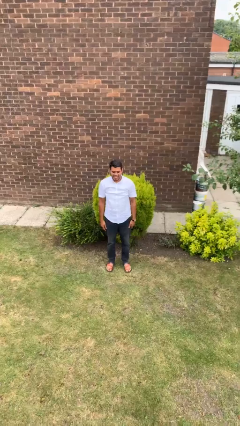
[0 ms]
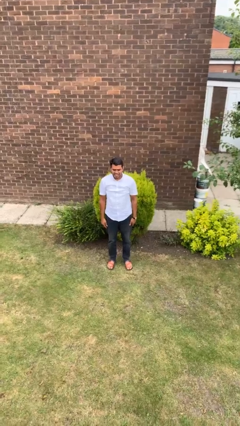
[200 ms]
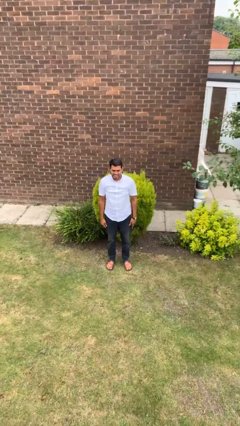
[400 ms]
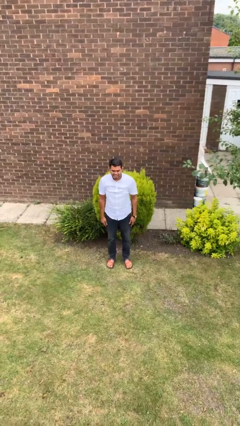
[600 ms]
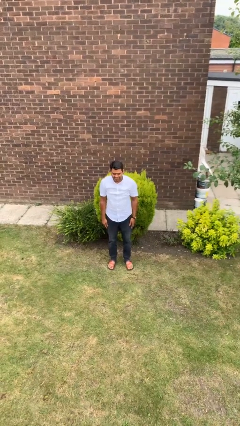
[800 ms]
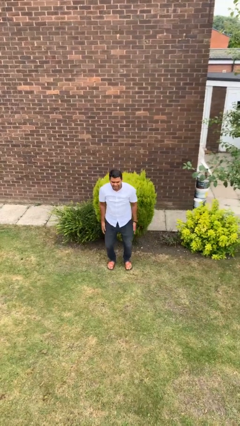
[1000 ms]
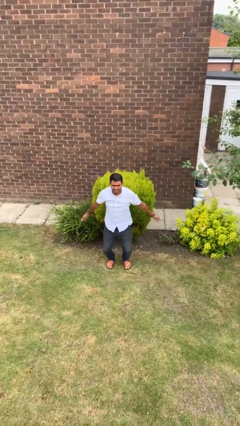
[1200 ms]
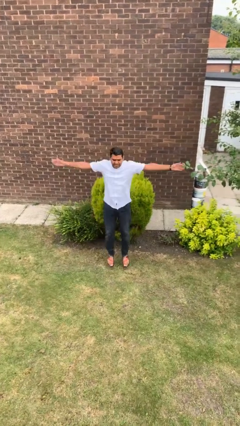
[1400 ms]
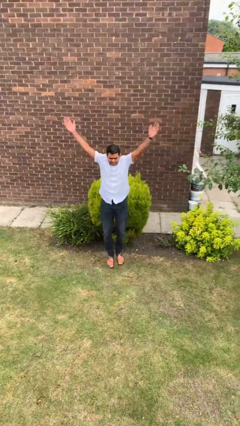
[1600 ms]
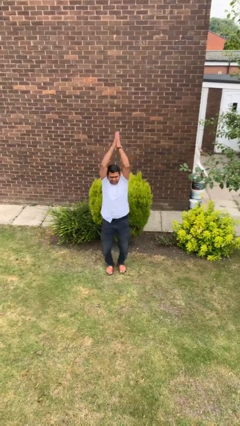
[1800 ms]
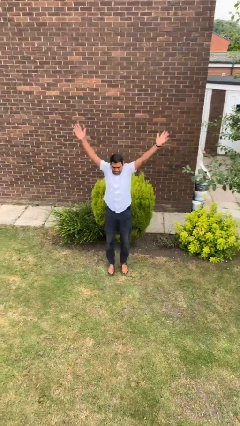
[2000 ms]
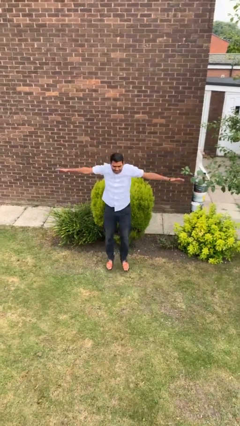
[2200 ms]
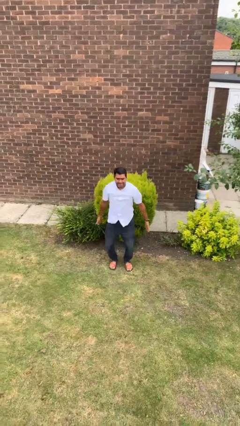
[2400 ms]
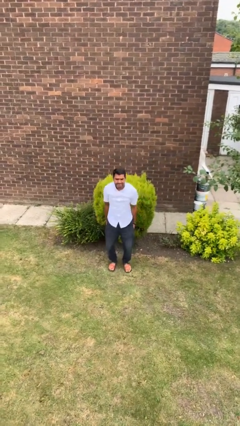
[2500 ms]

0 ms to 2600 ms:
person exercises with jumping jacks

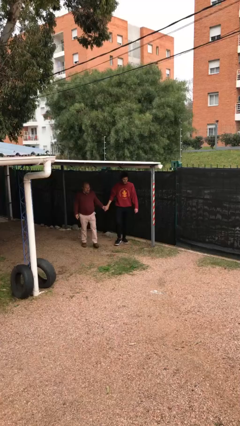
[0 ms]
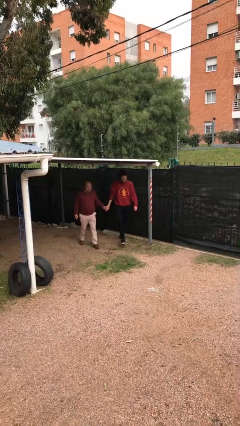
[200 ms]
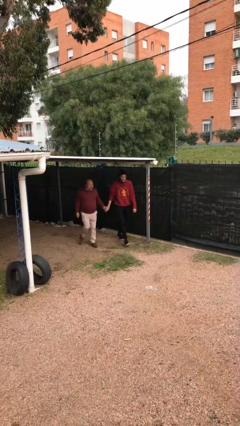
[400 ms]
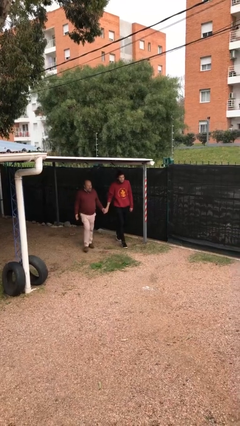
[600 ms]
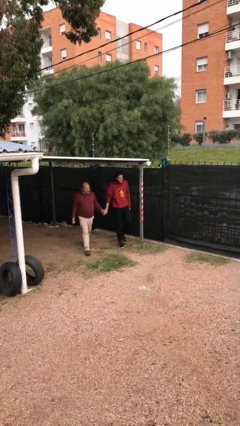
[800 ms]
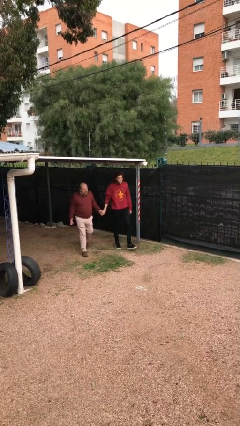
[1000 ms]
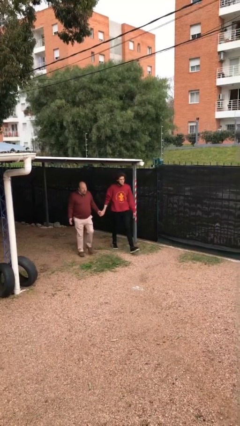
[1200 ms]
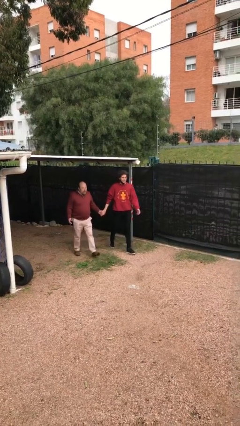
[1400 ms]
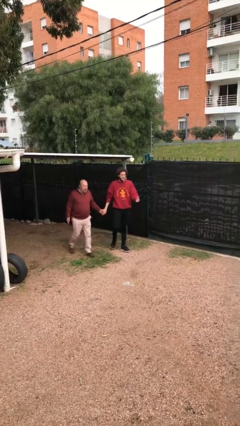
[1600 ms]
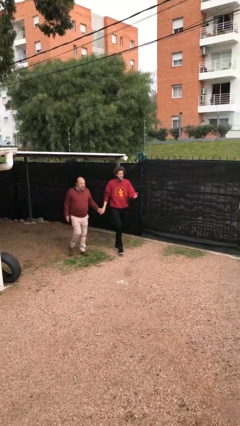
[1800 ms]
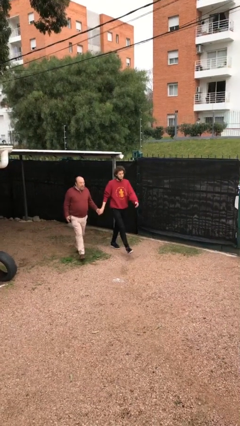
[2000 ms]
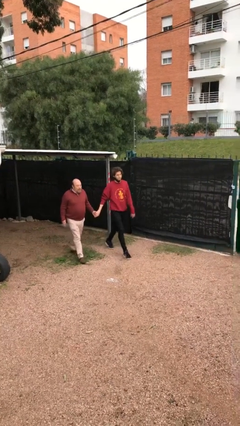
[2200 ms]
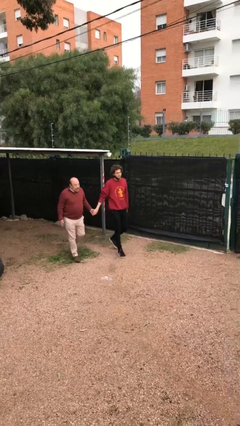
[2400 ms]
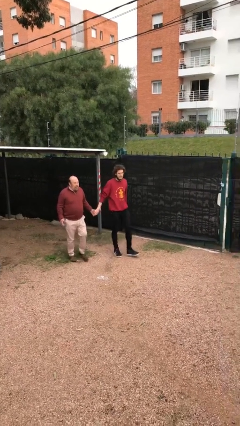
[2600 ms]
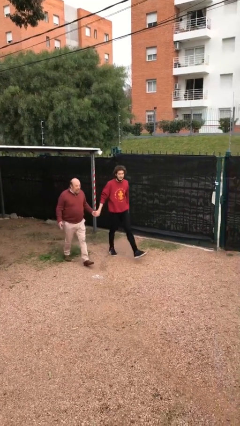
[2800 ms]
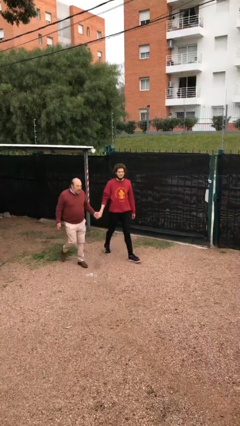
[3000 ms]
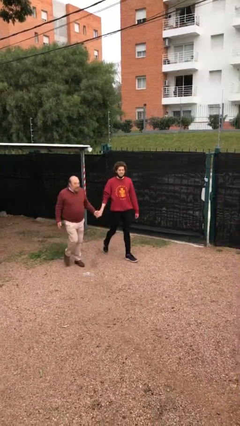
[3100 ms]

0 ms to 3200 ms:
person holds hand

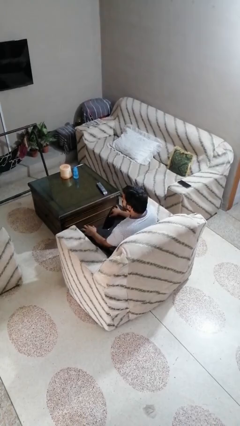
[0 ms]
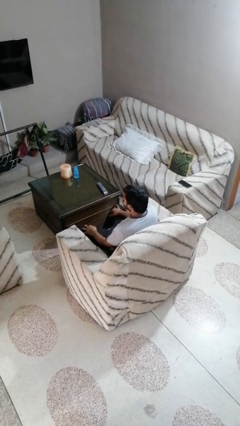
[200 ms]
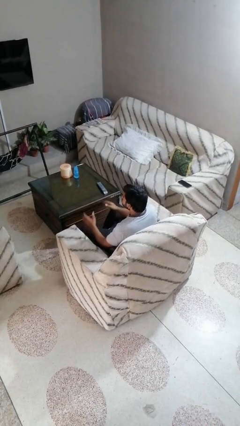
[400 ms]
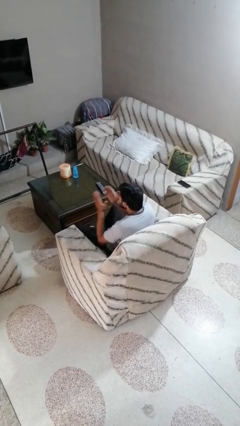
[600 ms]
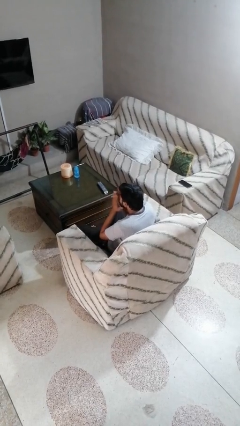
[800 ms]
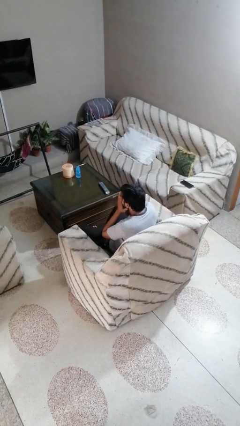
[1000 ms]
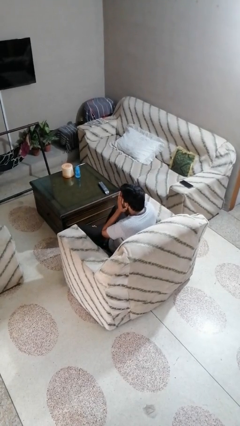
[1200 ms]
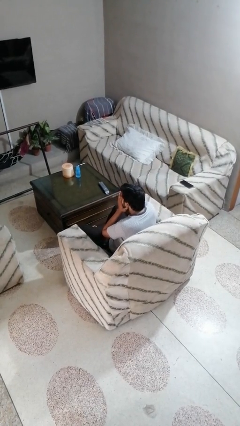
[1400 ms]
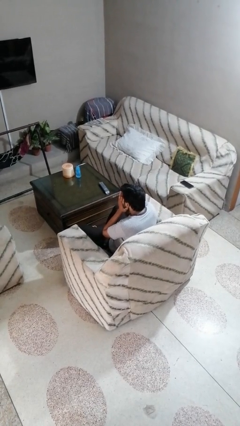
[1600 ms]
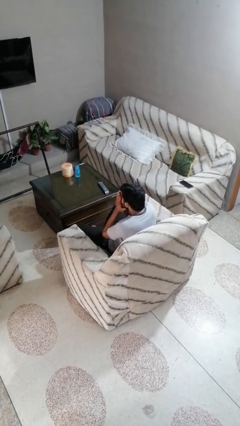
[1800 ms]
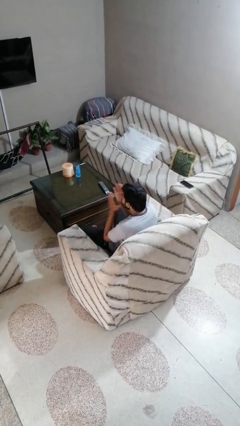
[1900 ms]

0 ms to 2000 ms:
person covers face with hands

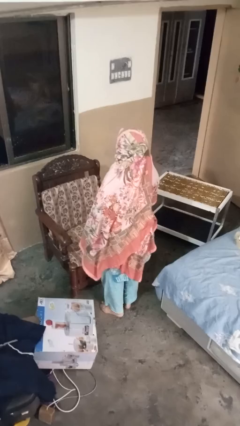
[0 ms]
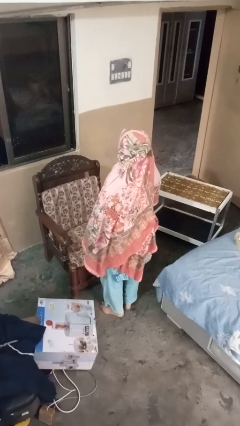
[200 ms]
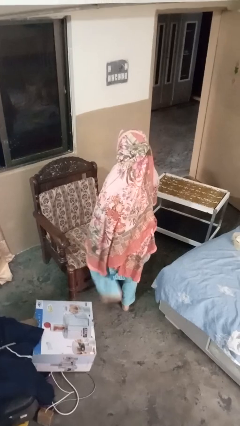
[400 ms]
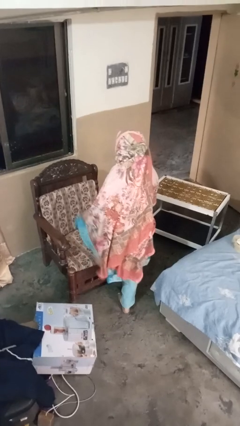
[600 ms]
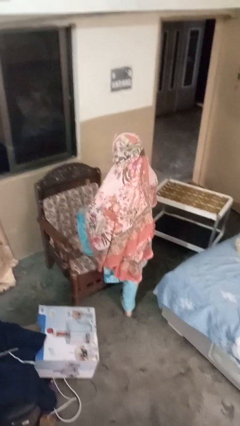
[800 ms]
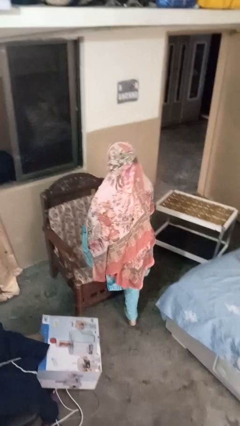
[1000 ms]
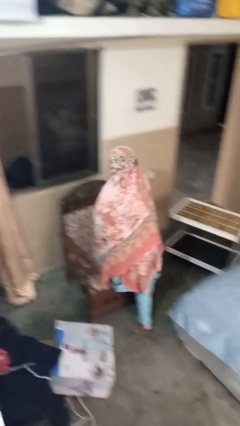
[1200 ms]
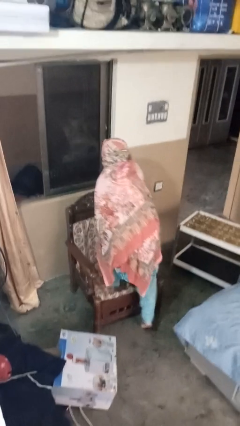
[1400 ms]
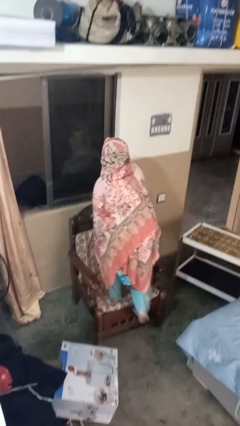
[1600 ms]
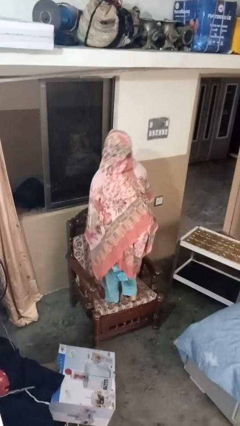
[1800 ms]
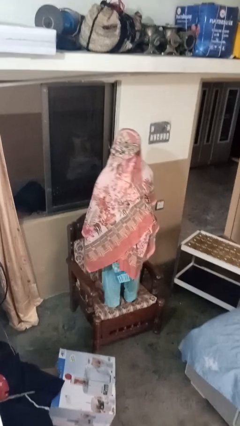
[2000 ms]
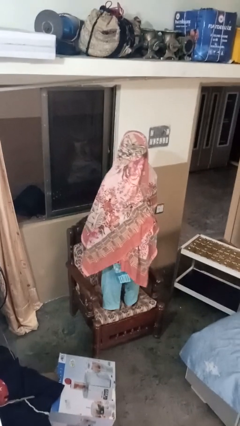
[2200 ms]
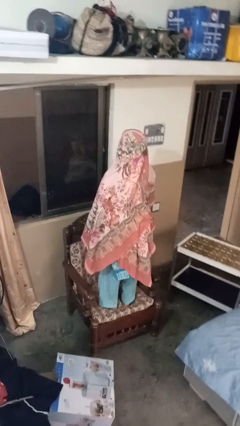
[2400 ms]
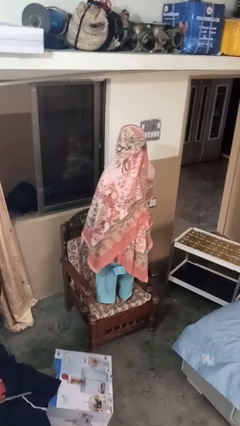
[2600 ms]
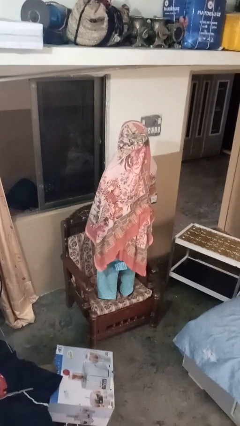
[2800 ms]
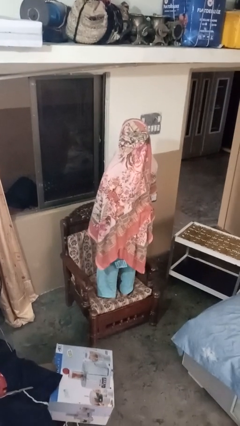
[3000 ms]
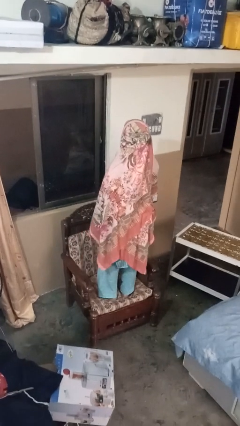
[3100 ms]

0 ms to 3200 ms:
person climbs on couch

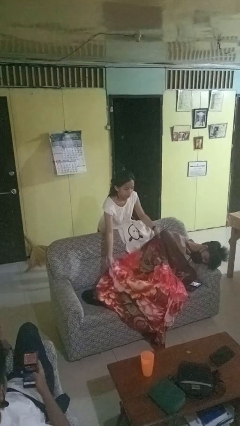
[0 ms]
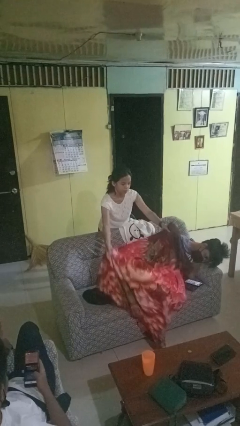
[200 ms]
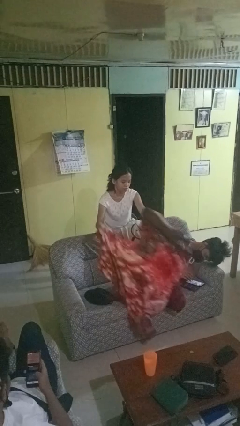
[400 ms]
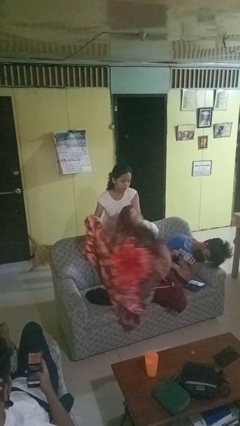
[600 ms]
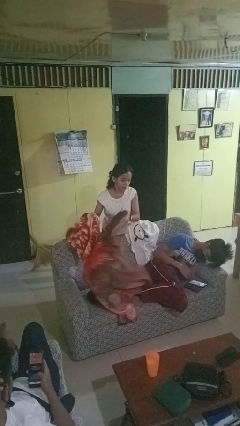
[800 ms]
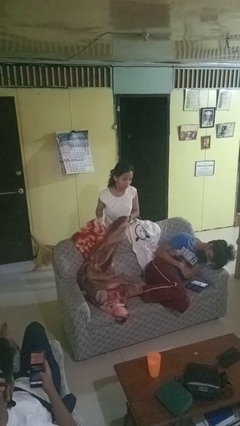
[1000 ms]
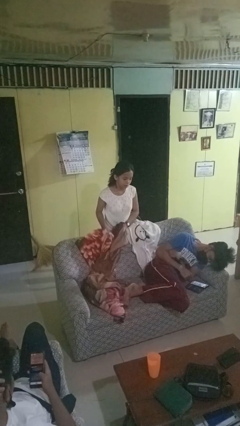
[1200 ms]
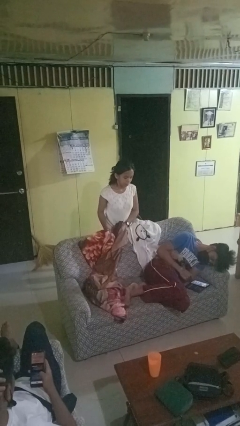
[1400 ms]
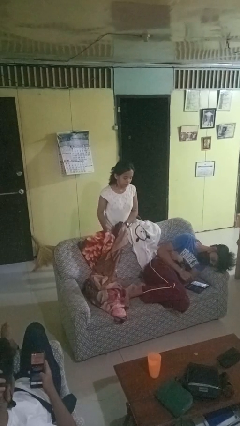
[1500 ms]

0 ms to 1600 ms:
person uncovers friend with blanket

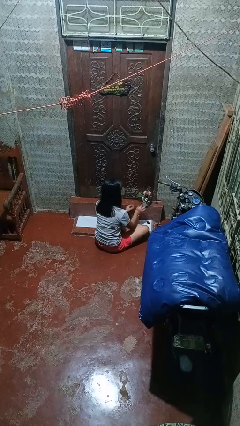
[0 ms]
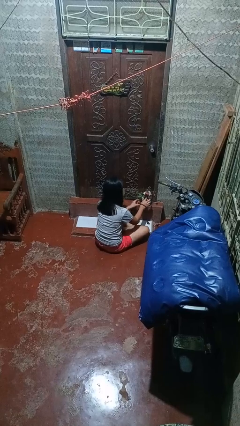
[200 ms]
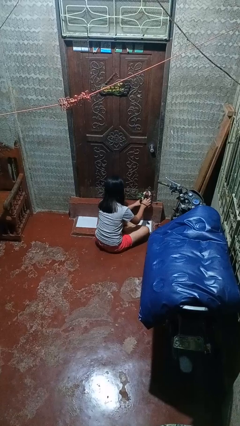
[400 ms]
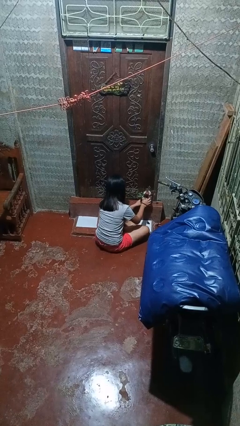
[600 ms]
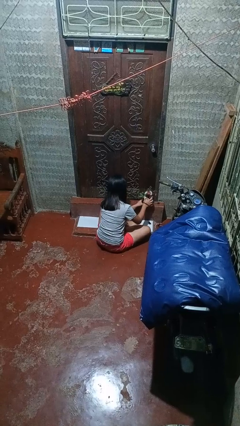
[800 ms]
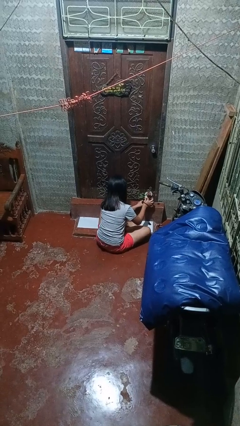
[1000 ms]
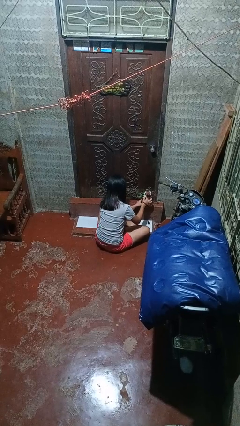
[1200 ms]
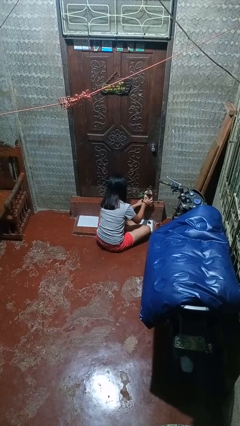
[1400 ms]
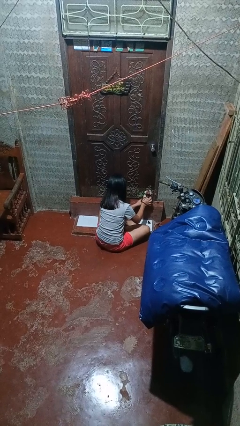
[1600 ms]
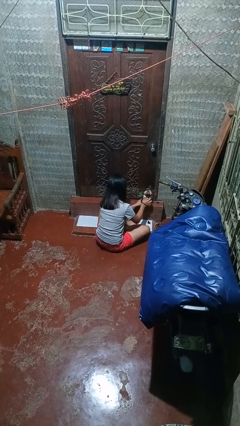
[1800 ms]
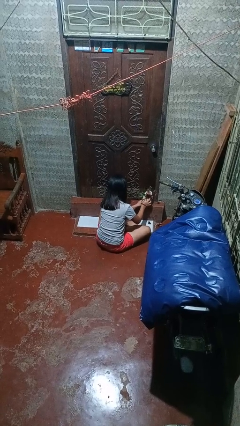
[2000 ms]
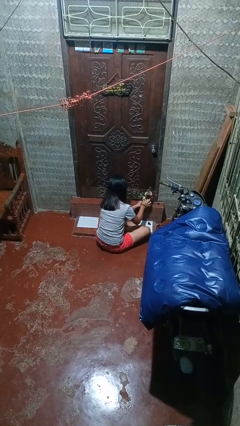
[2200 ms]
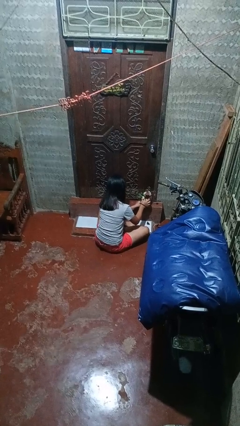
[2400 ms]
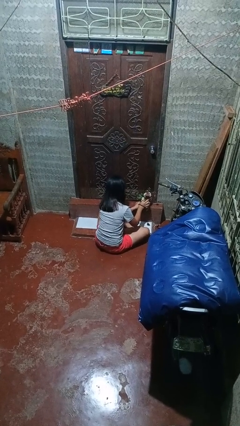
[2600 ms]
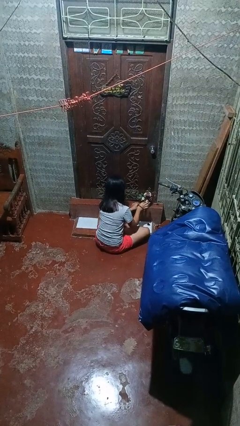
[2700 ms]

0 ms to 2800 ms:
person arranges flowers in vase

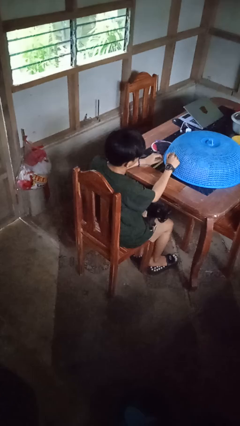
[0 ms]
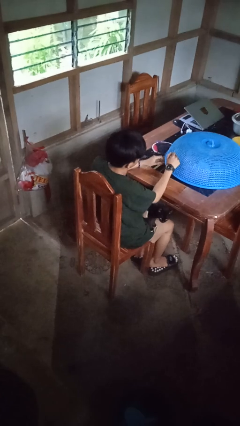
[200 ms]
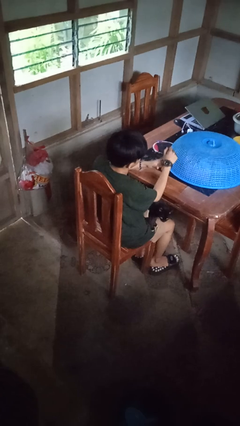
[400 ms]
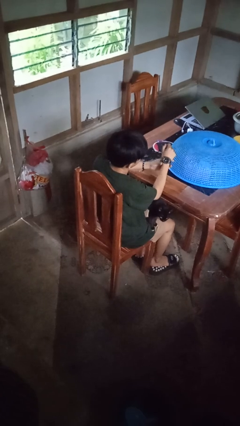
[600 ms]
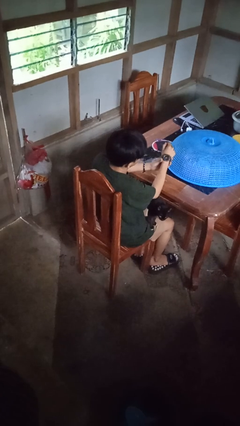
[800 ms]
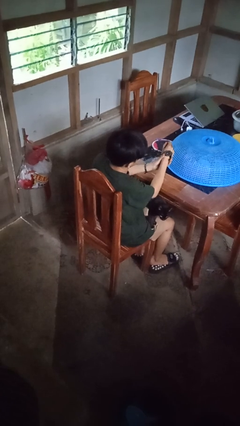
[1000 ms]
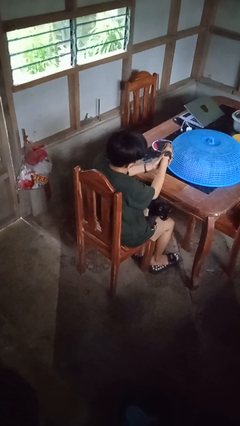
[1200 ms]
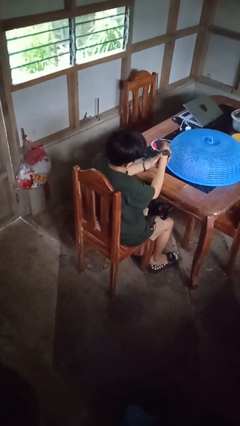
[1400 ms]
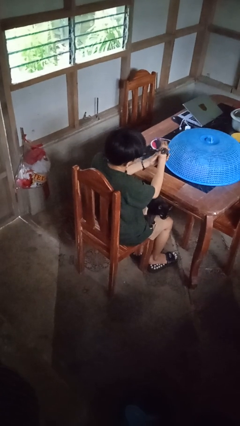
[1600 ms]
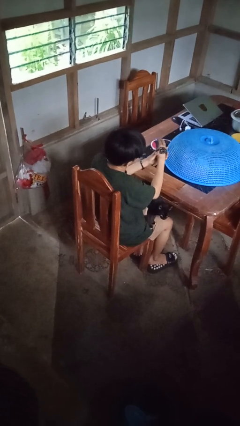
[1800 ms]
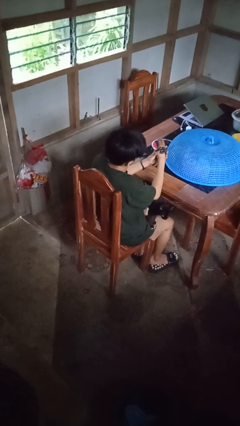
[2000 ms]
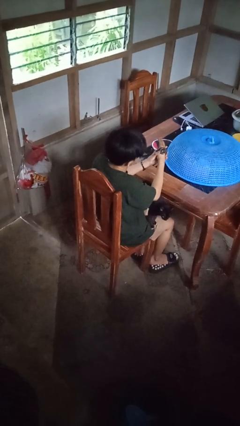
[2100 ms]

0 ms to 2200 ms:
person takes off wristwatch
